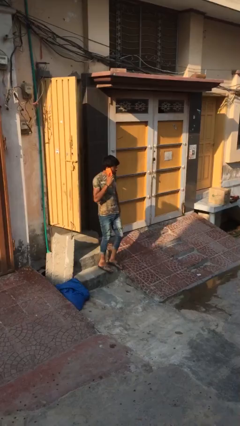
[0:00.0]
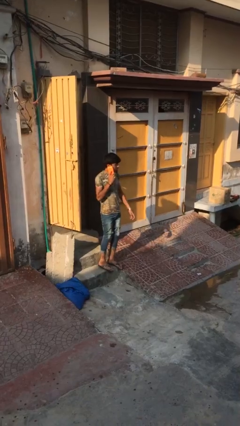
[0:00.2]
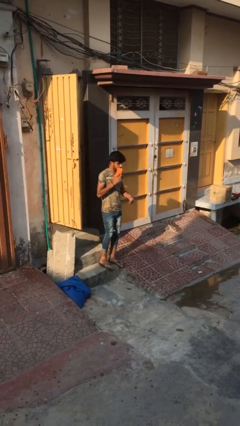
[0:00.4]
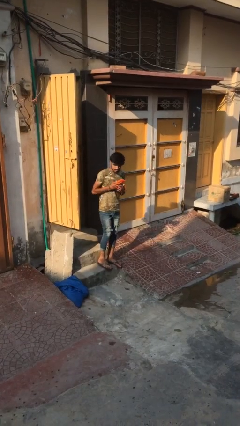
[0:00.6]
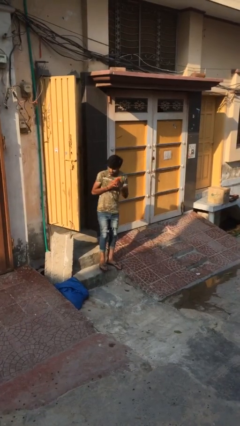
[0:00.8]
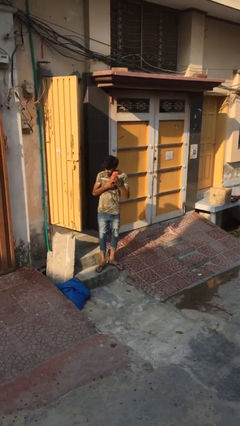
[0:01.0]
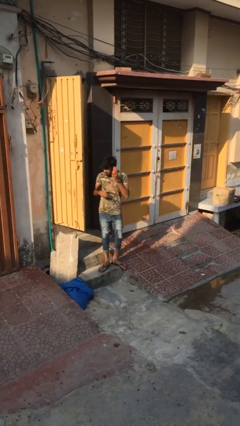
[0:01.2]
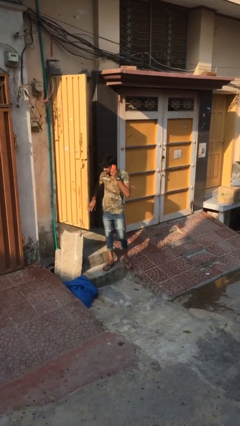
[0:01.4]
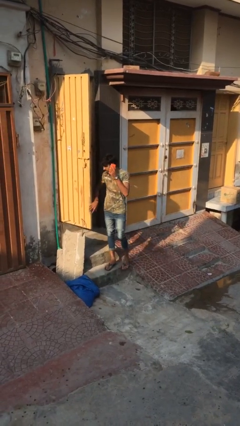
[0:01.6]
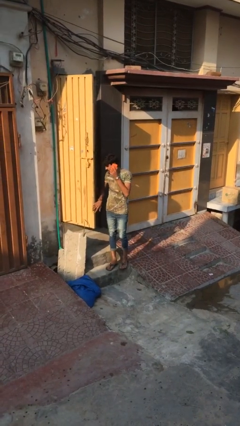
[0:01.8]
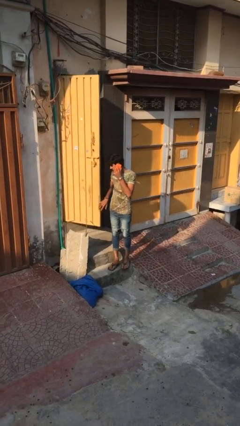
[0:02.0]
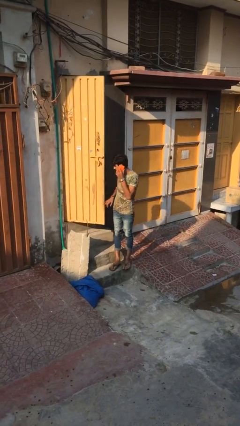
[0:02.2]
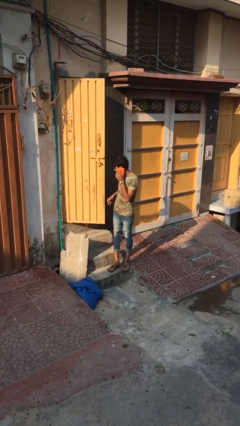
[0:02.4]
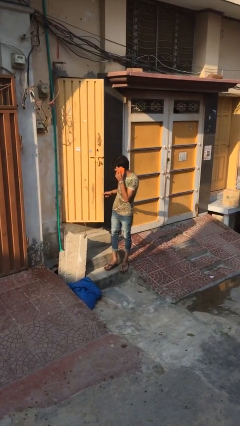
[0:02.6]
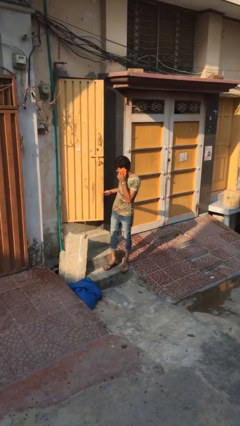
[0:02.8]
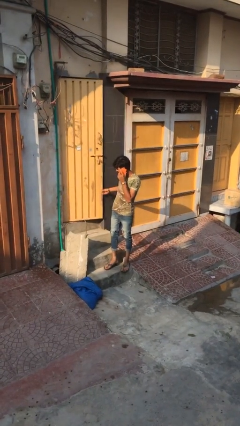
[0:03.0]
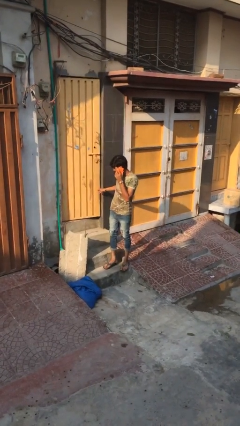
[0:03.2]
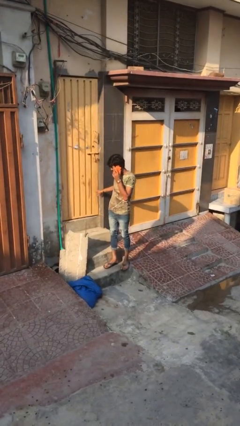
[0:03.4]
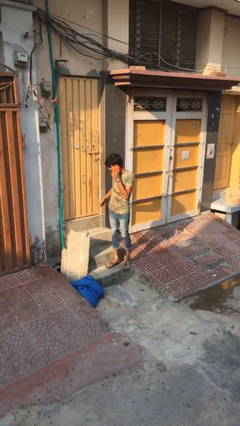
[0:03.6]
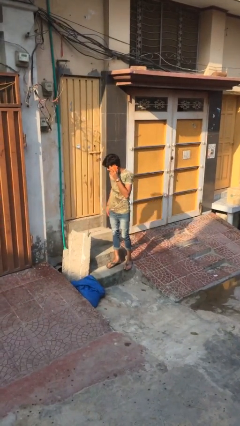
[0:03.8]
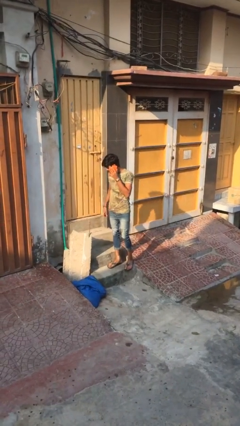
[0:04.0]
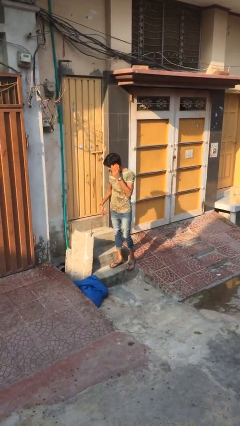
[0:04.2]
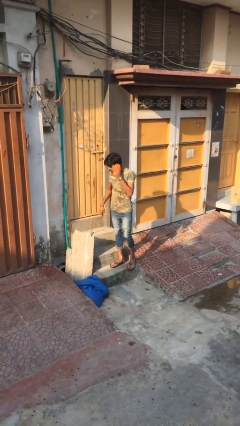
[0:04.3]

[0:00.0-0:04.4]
person closes facility door

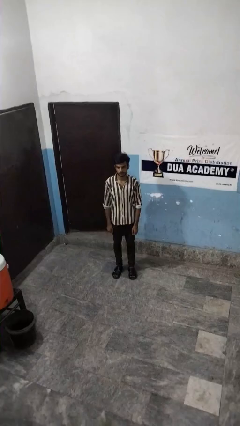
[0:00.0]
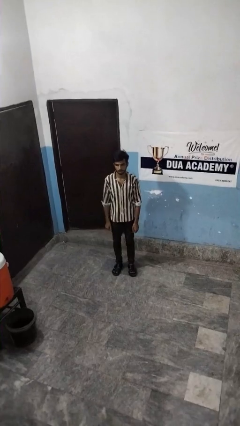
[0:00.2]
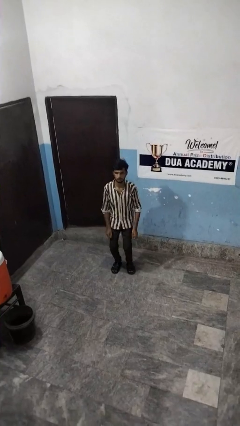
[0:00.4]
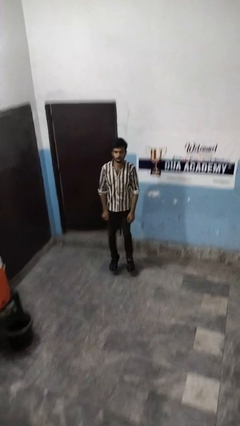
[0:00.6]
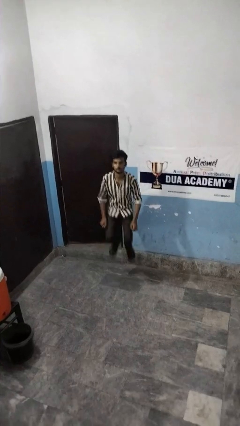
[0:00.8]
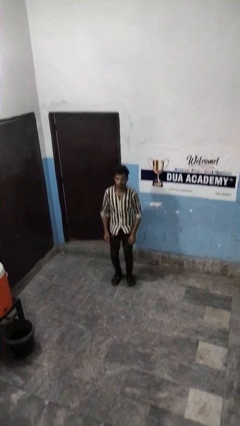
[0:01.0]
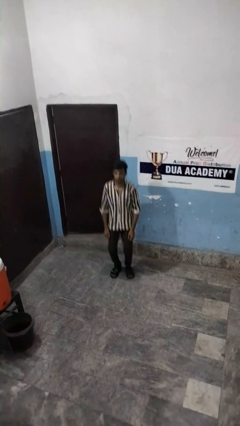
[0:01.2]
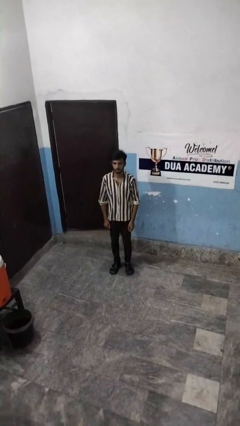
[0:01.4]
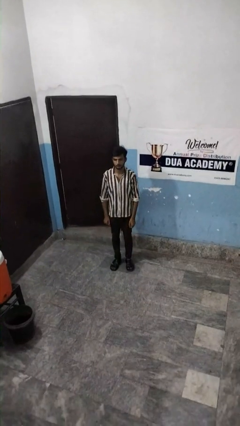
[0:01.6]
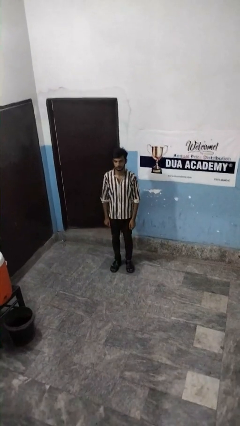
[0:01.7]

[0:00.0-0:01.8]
person jumps

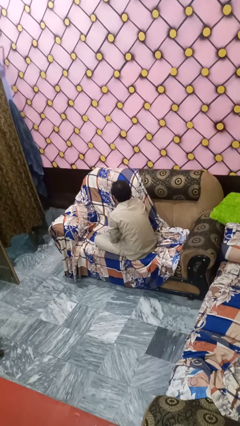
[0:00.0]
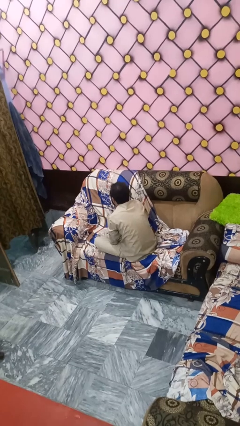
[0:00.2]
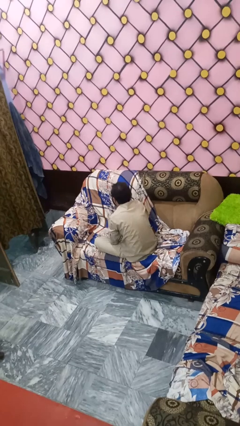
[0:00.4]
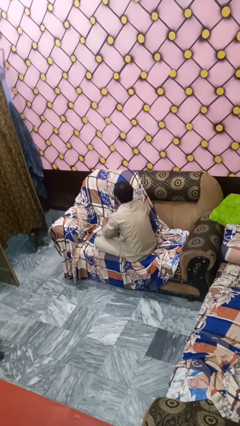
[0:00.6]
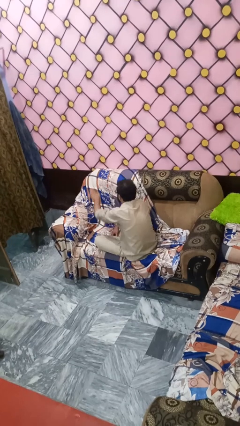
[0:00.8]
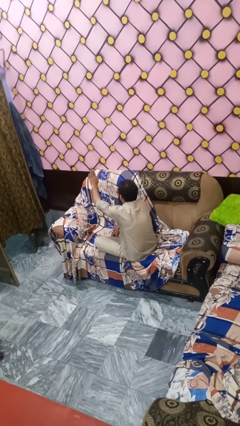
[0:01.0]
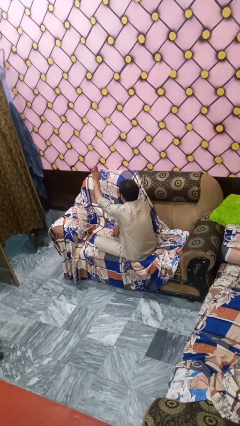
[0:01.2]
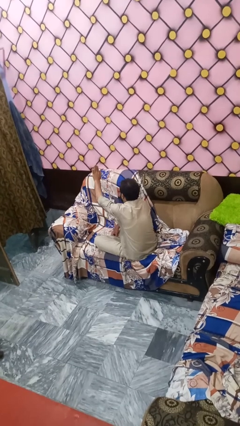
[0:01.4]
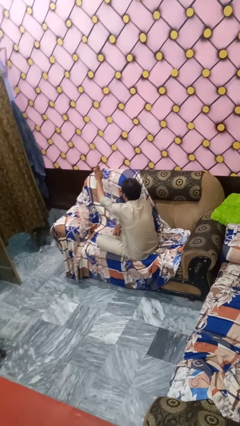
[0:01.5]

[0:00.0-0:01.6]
person gestures stop

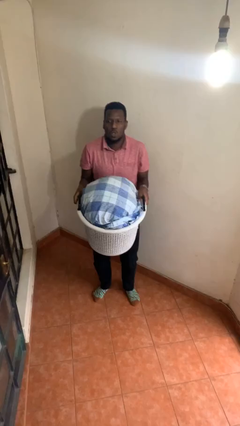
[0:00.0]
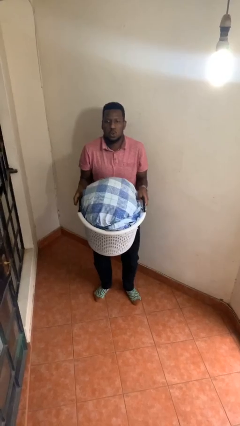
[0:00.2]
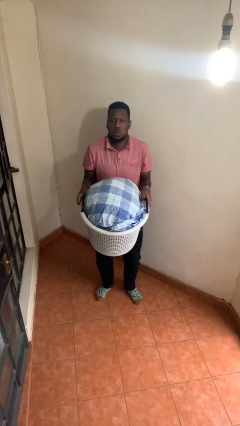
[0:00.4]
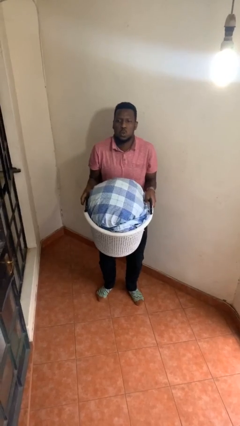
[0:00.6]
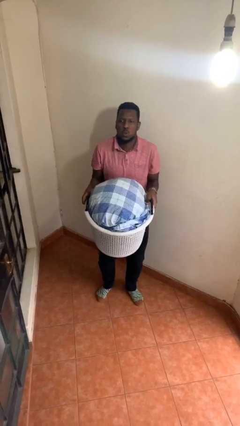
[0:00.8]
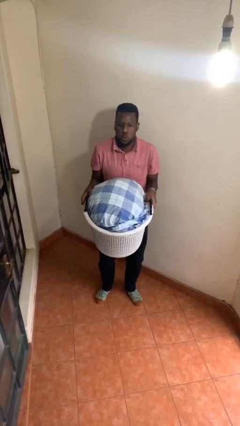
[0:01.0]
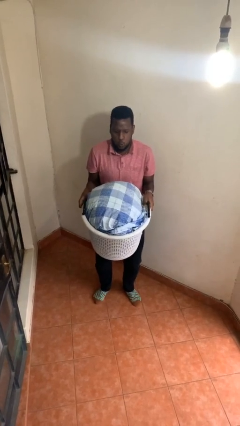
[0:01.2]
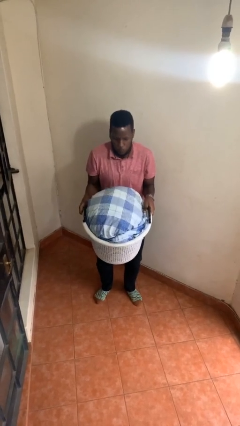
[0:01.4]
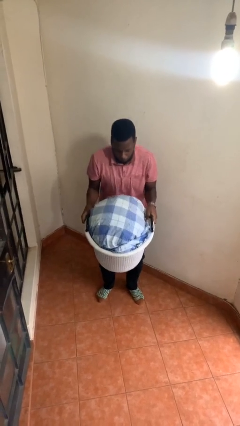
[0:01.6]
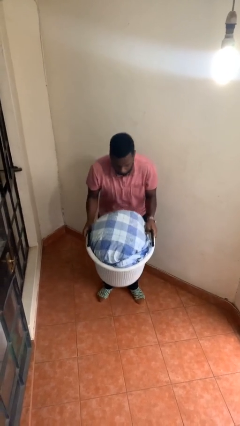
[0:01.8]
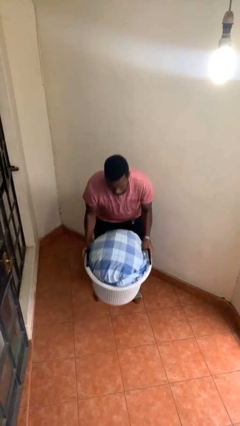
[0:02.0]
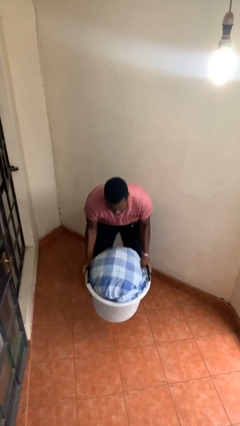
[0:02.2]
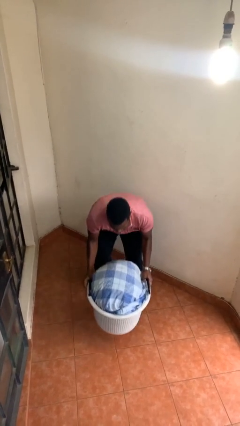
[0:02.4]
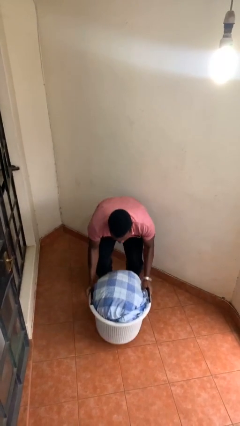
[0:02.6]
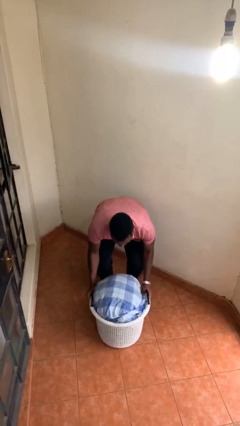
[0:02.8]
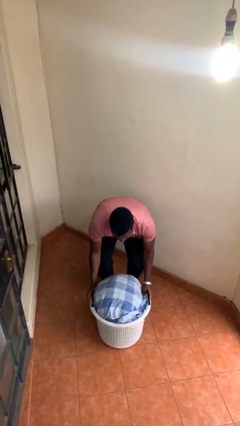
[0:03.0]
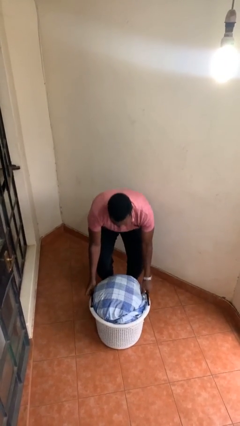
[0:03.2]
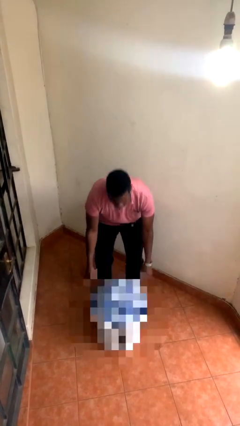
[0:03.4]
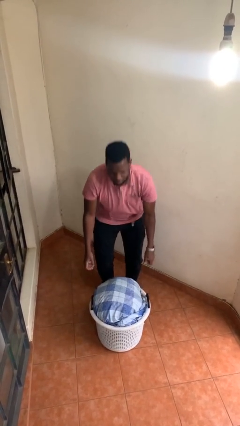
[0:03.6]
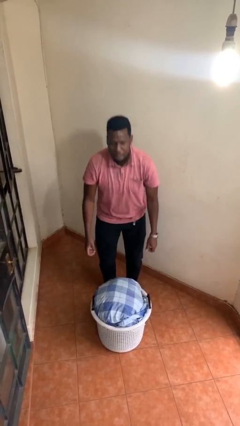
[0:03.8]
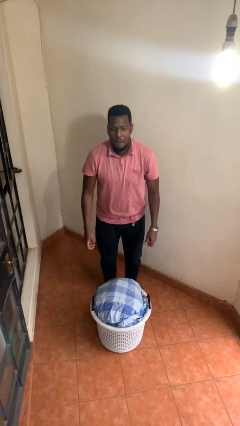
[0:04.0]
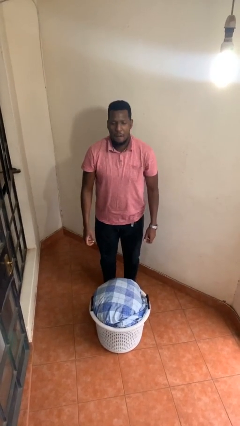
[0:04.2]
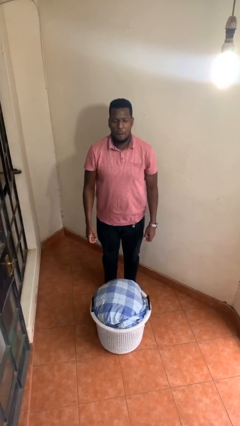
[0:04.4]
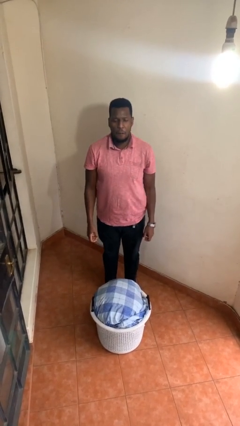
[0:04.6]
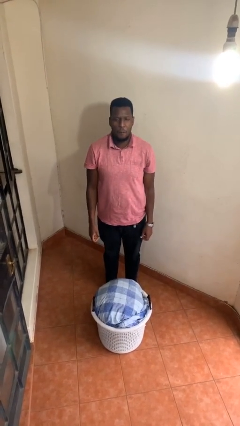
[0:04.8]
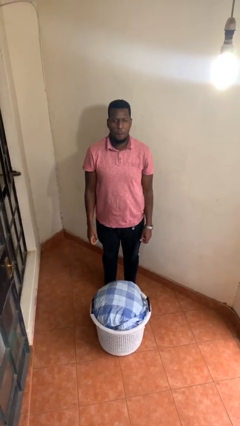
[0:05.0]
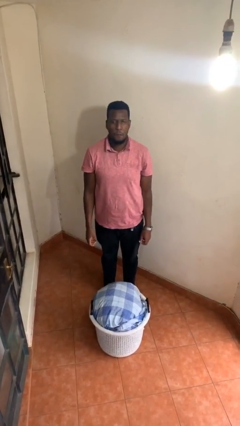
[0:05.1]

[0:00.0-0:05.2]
person puts down object on floor

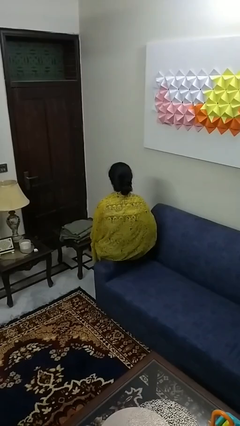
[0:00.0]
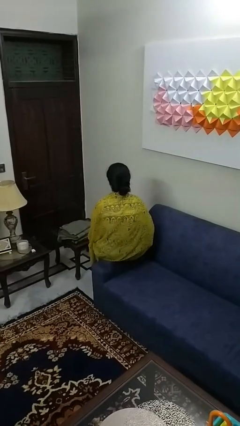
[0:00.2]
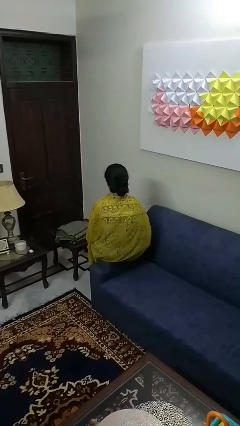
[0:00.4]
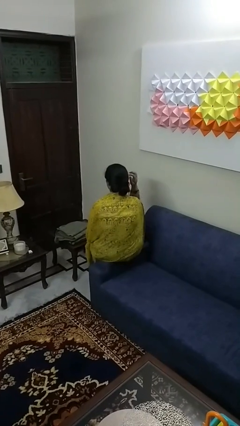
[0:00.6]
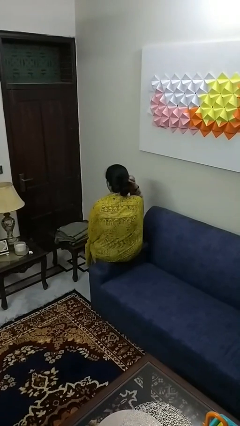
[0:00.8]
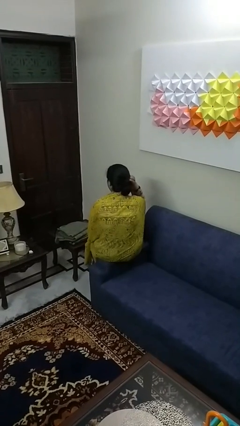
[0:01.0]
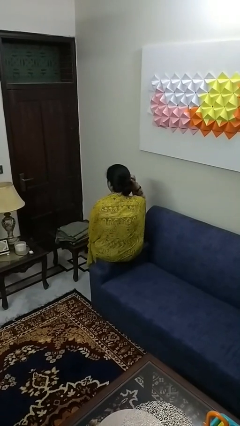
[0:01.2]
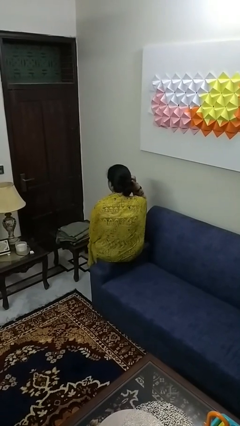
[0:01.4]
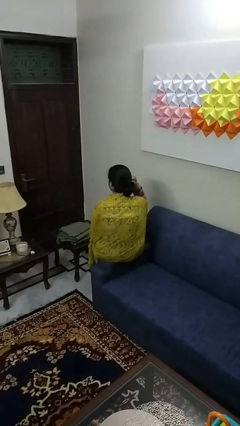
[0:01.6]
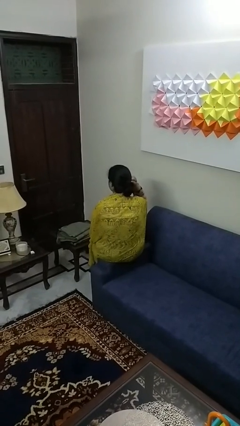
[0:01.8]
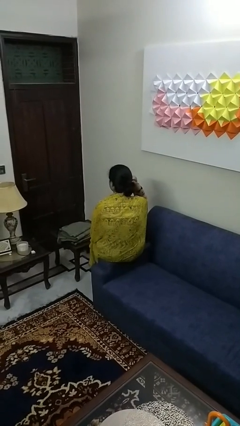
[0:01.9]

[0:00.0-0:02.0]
person scratches face

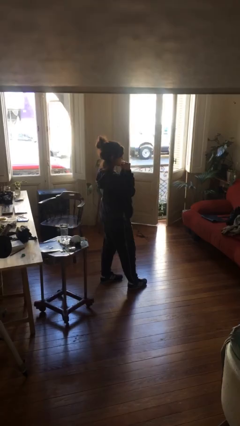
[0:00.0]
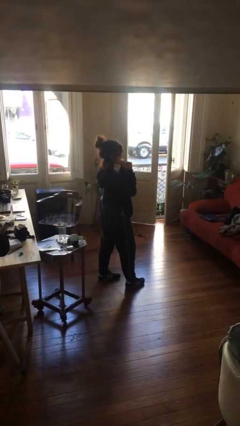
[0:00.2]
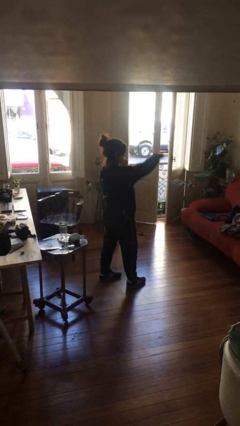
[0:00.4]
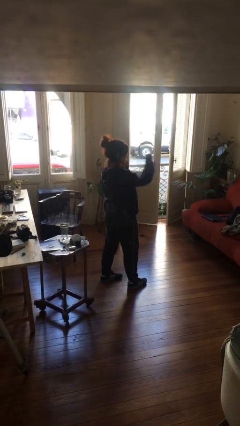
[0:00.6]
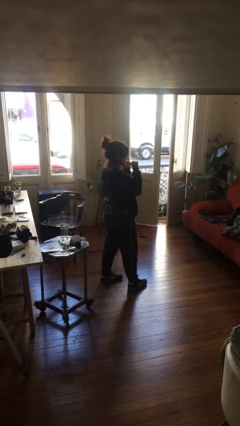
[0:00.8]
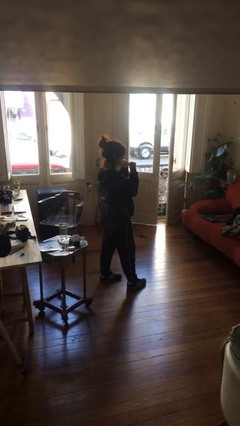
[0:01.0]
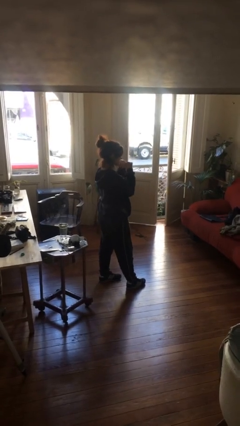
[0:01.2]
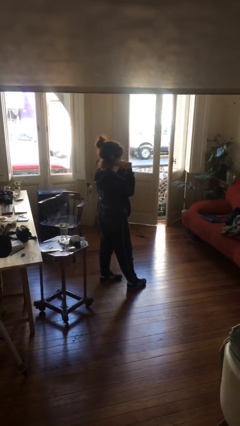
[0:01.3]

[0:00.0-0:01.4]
person punches

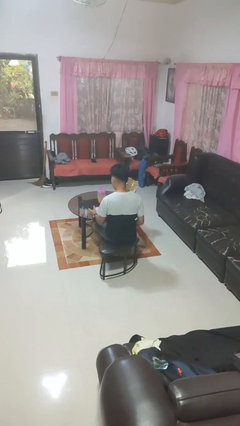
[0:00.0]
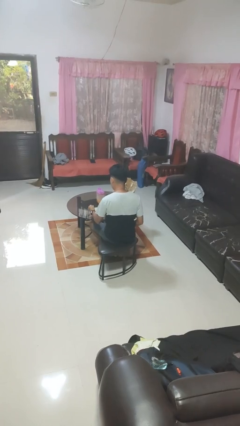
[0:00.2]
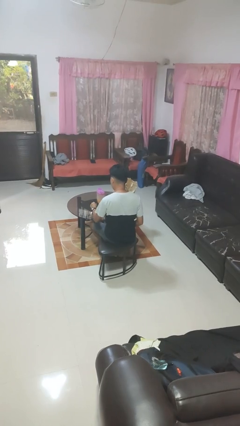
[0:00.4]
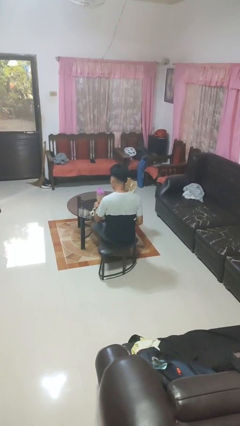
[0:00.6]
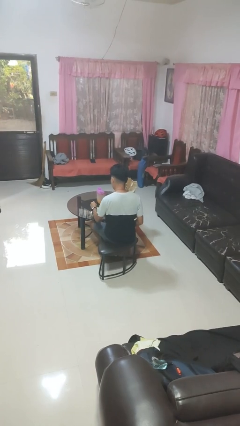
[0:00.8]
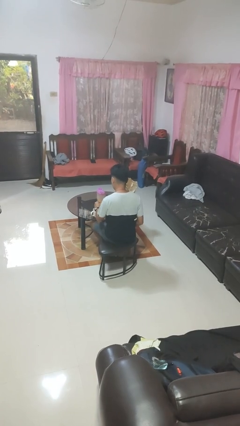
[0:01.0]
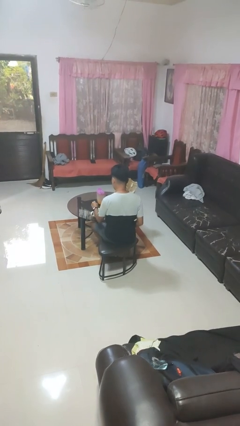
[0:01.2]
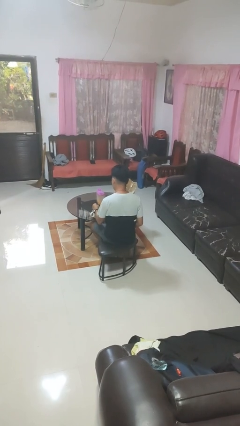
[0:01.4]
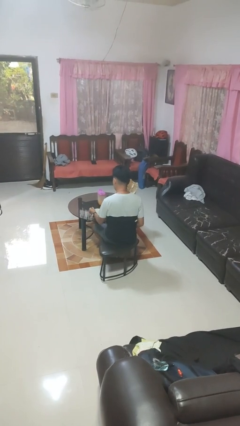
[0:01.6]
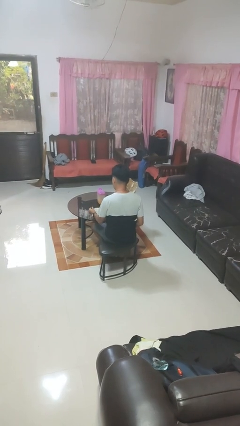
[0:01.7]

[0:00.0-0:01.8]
person stirs mug
